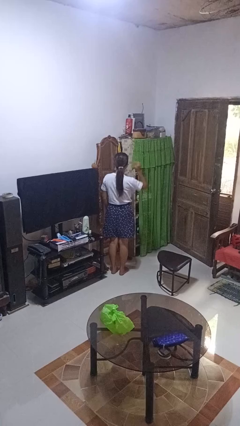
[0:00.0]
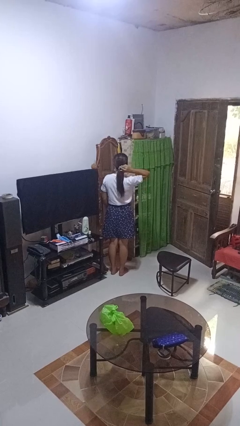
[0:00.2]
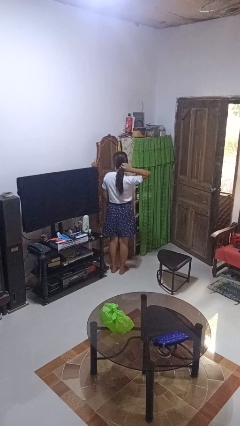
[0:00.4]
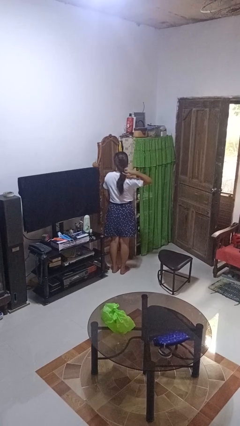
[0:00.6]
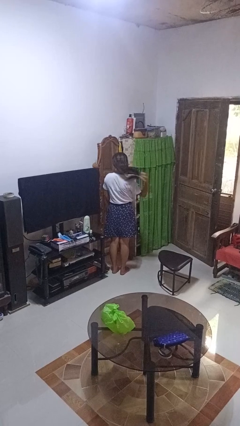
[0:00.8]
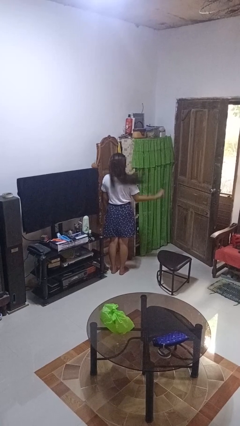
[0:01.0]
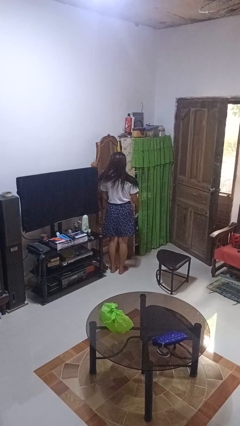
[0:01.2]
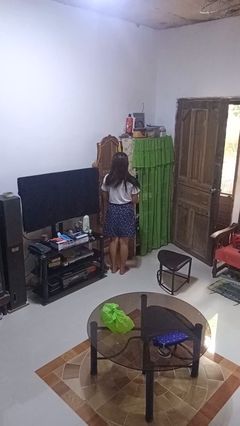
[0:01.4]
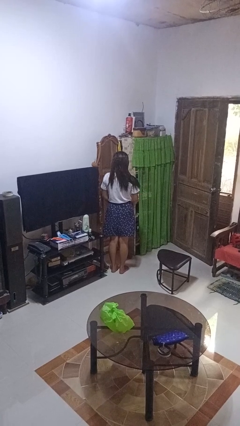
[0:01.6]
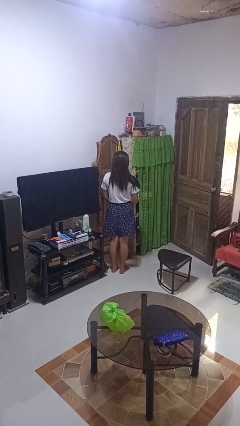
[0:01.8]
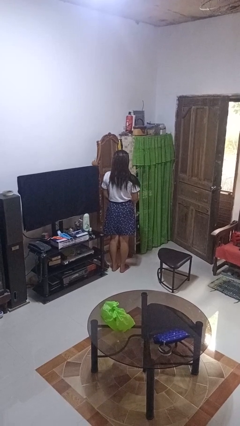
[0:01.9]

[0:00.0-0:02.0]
person takes off hairtie

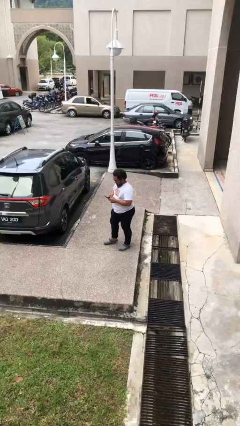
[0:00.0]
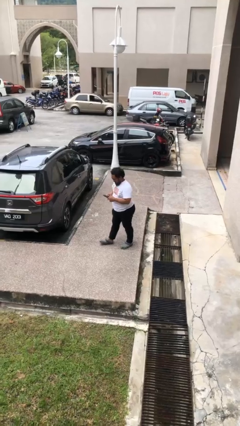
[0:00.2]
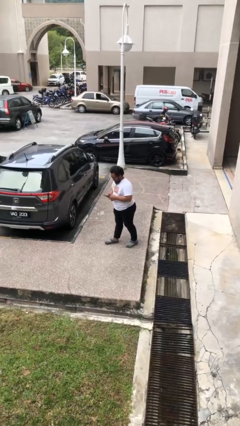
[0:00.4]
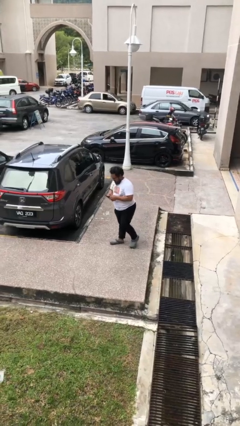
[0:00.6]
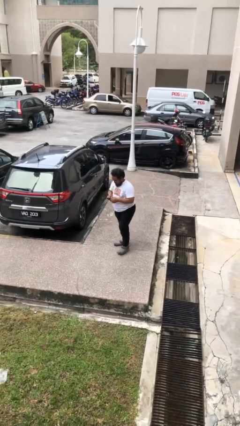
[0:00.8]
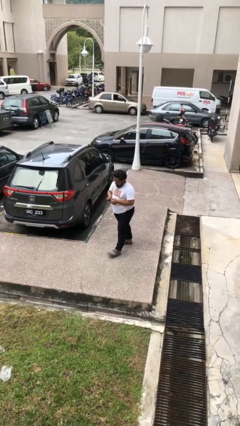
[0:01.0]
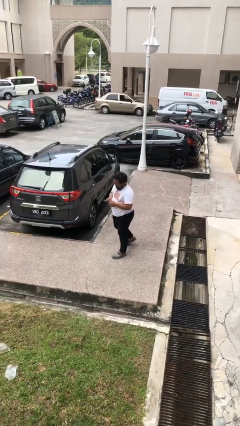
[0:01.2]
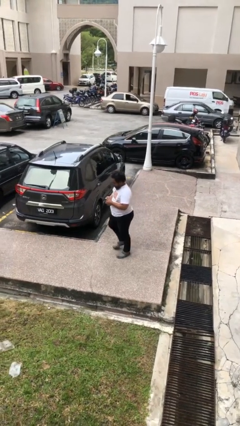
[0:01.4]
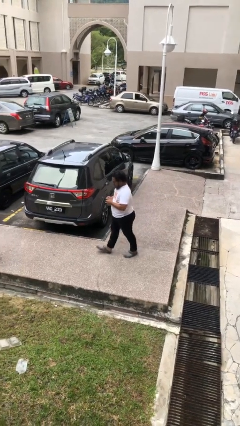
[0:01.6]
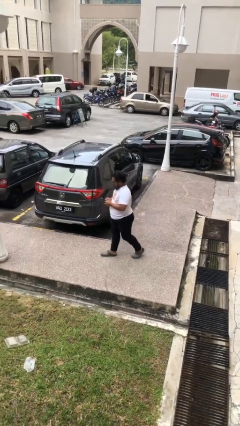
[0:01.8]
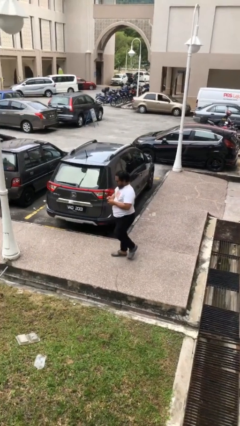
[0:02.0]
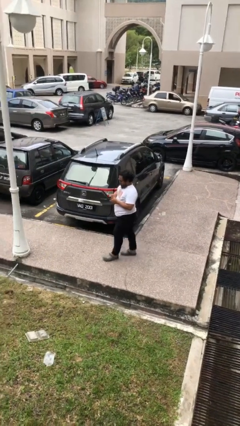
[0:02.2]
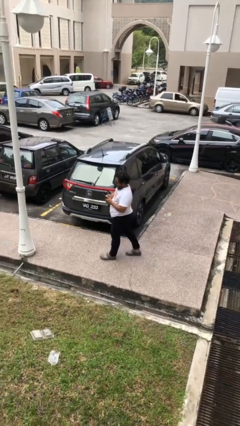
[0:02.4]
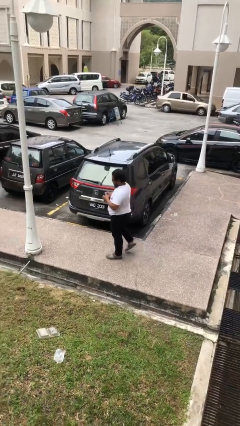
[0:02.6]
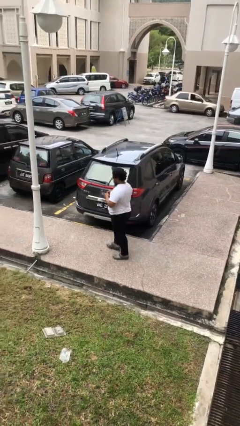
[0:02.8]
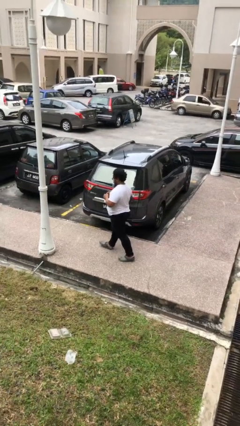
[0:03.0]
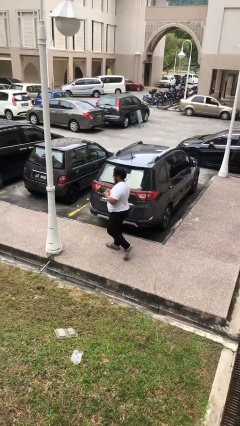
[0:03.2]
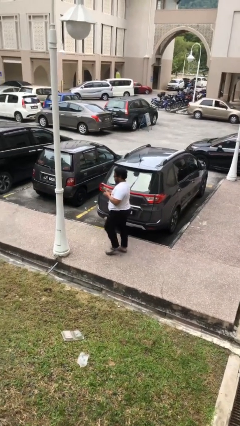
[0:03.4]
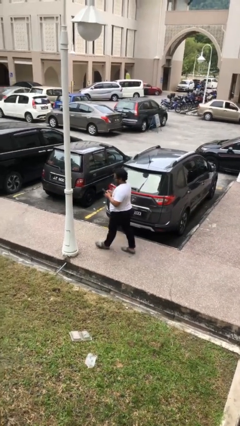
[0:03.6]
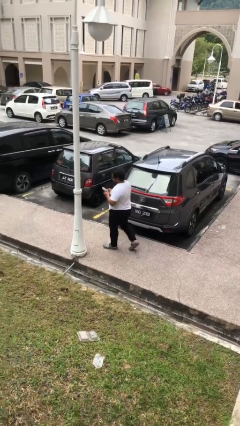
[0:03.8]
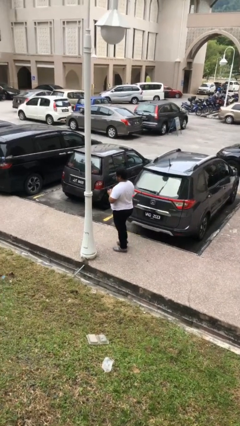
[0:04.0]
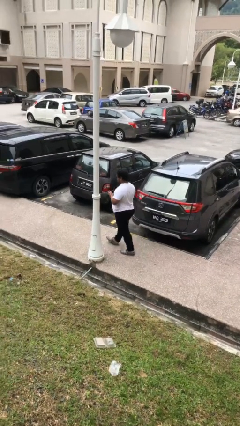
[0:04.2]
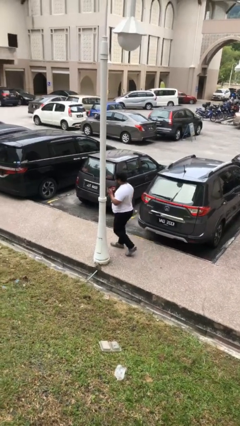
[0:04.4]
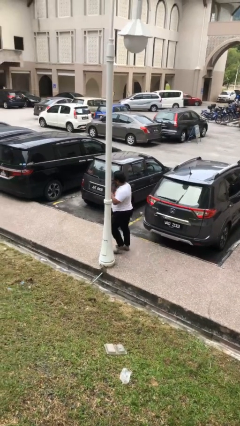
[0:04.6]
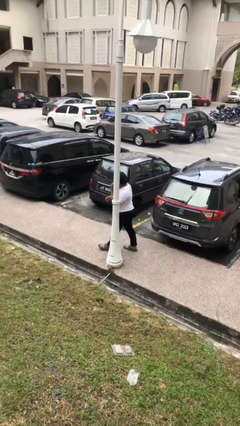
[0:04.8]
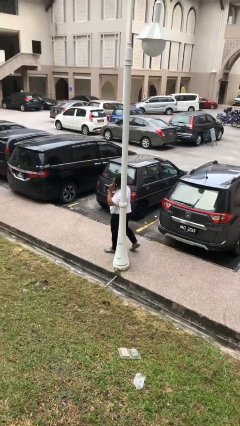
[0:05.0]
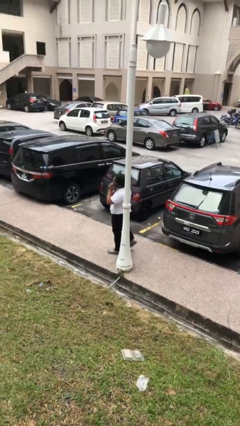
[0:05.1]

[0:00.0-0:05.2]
person texts on phone

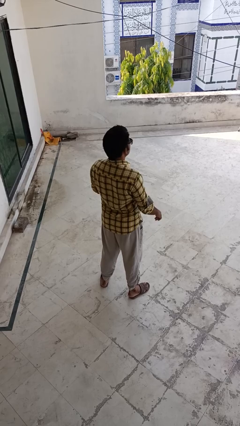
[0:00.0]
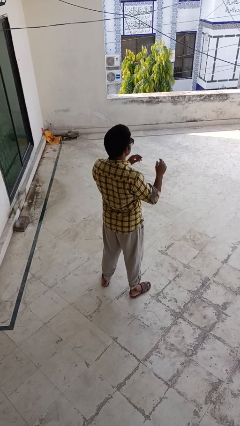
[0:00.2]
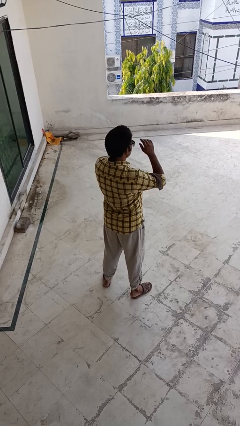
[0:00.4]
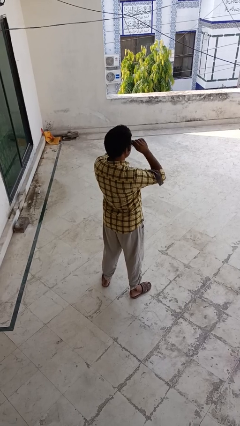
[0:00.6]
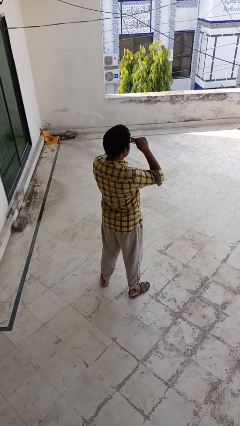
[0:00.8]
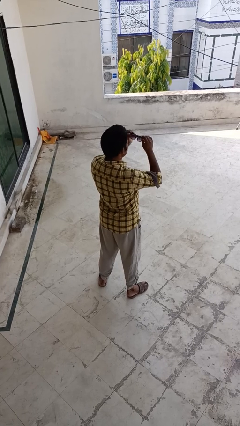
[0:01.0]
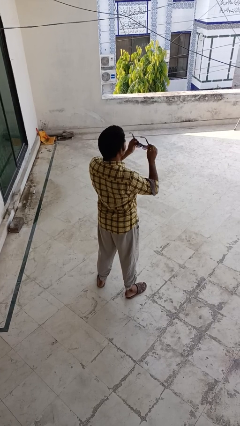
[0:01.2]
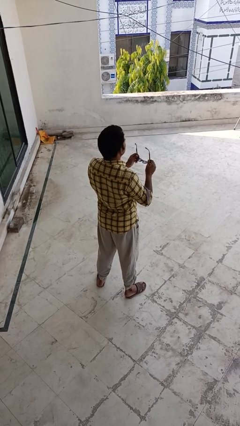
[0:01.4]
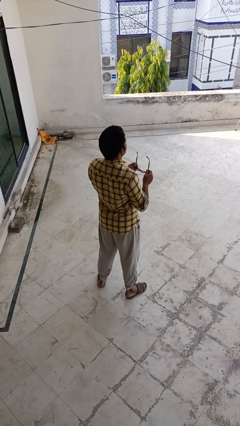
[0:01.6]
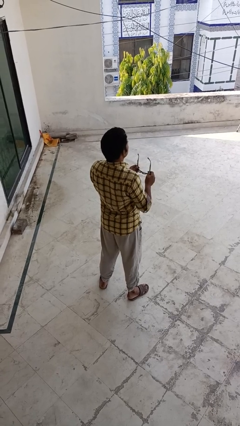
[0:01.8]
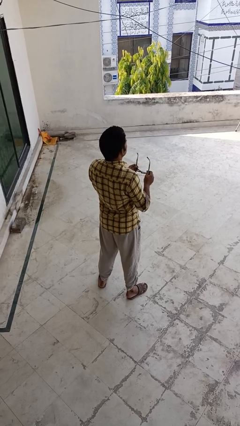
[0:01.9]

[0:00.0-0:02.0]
person takes off sunglasses

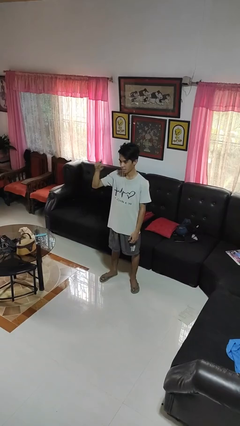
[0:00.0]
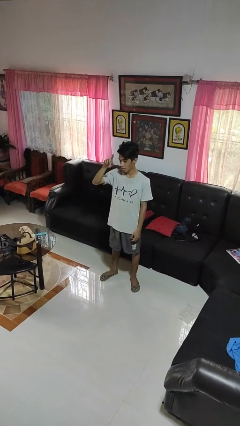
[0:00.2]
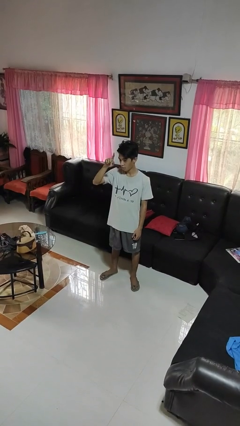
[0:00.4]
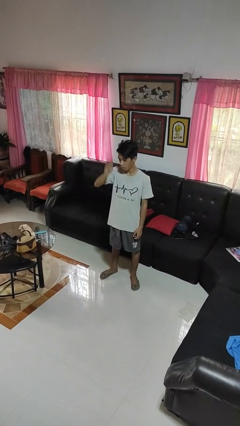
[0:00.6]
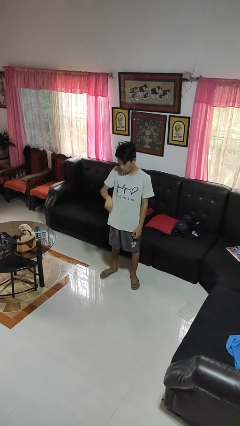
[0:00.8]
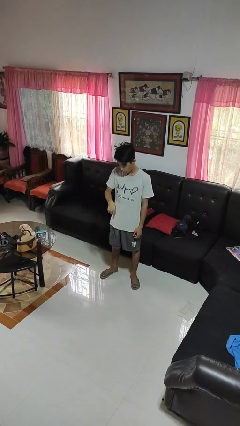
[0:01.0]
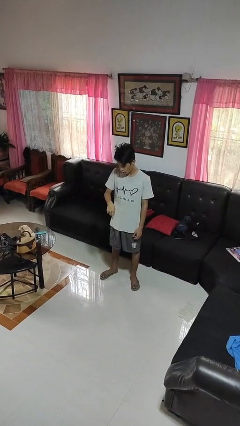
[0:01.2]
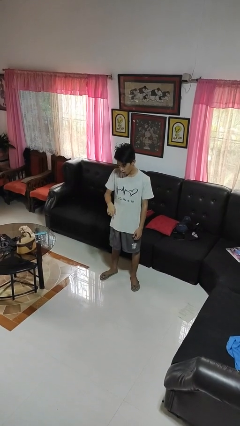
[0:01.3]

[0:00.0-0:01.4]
person gestures swipe down

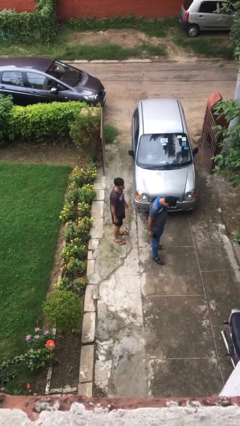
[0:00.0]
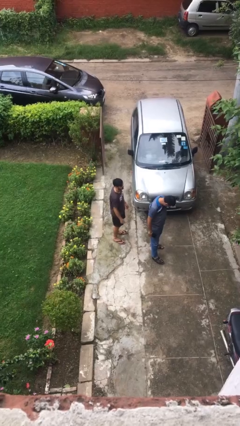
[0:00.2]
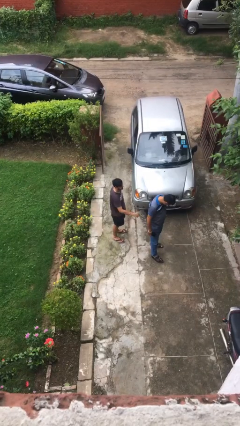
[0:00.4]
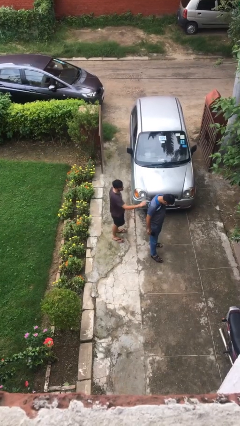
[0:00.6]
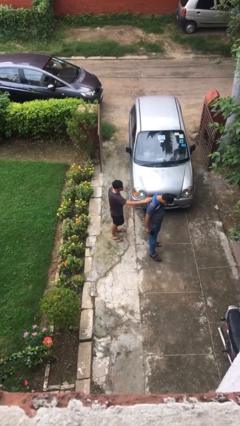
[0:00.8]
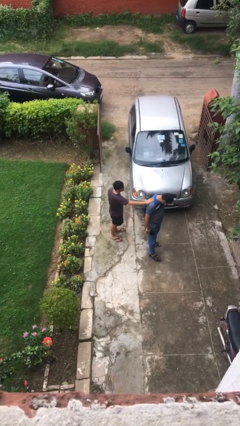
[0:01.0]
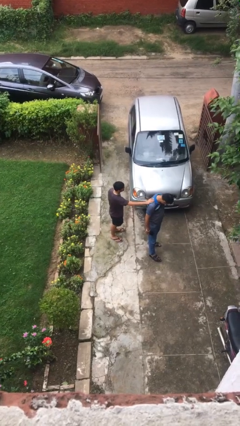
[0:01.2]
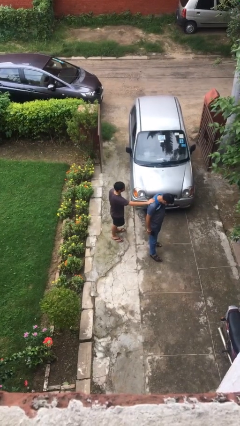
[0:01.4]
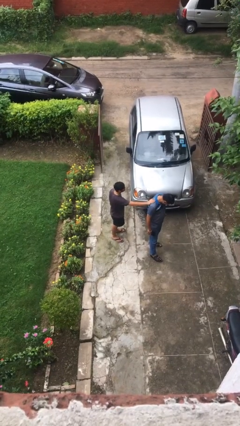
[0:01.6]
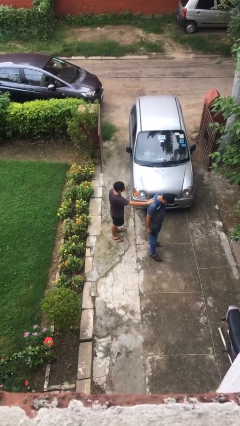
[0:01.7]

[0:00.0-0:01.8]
person touches back of person

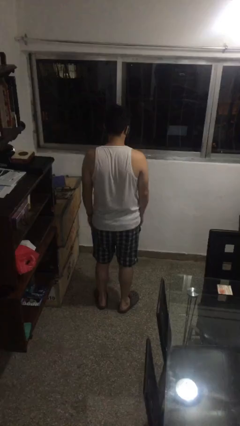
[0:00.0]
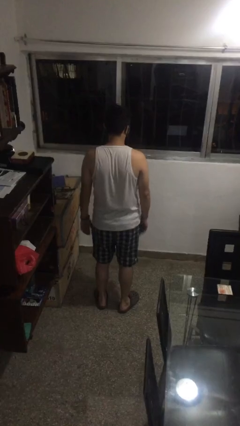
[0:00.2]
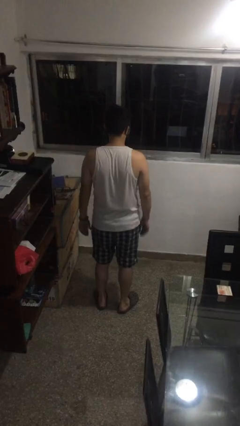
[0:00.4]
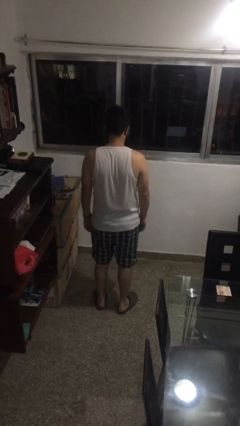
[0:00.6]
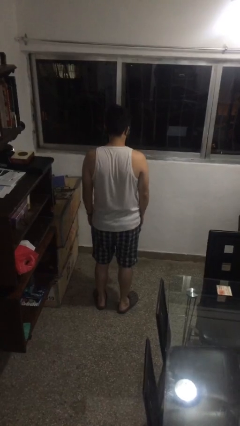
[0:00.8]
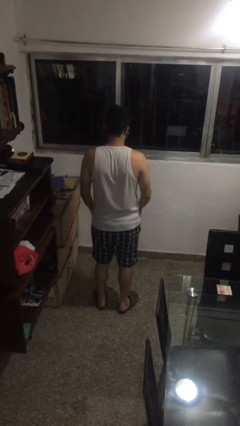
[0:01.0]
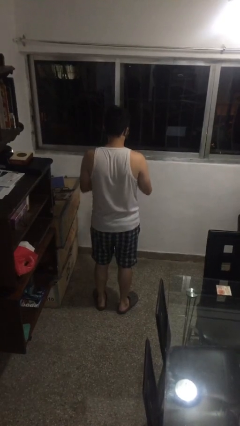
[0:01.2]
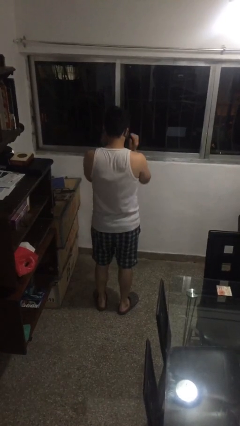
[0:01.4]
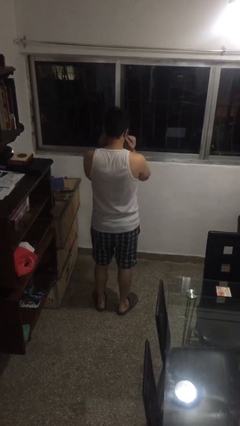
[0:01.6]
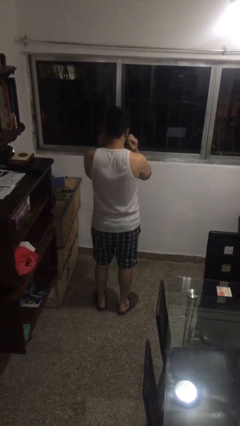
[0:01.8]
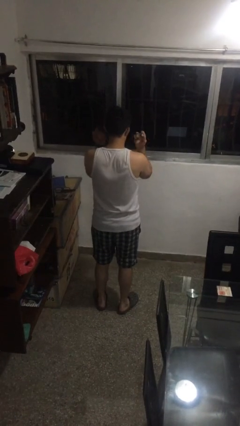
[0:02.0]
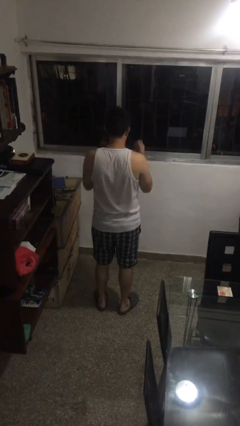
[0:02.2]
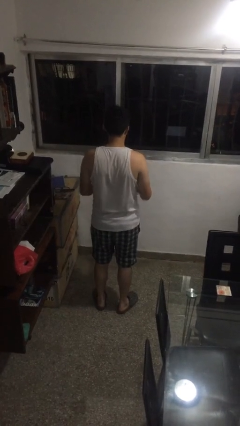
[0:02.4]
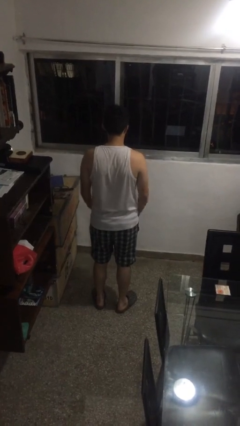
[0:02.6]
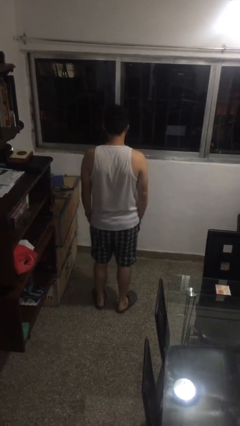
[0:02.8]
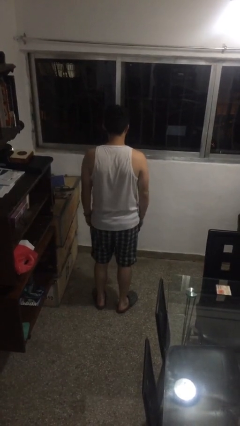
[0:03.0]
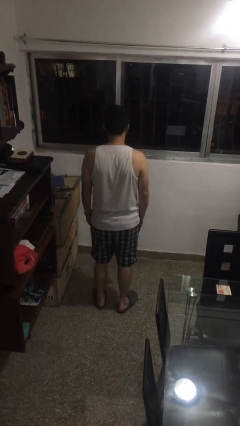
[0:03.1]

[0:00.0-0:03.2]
person takes off facemask

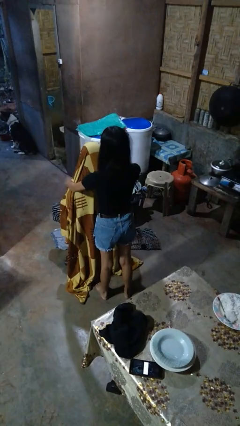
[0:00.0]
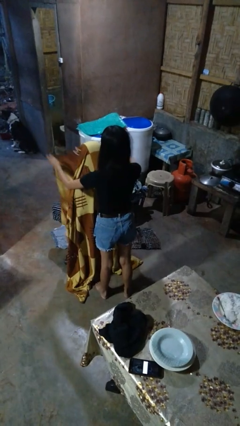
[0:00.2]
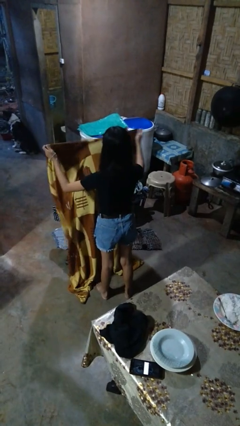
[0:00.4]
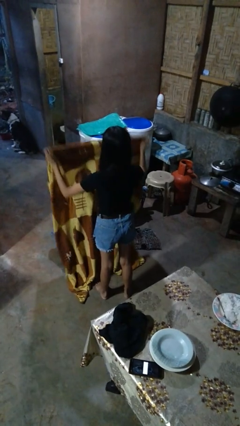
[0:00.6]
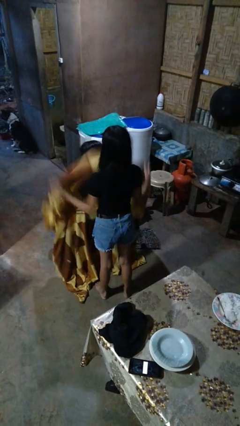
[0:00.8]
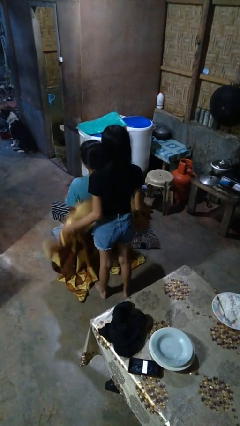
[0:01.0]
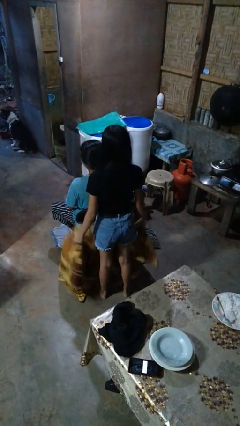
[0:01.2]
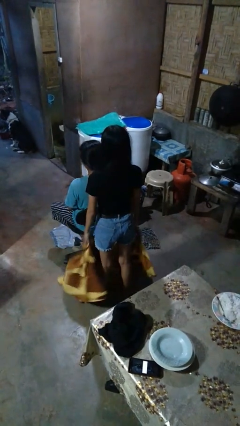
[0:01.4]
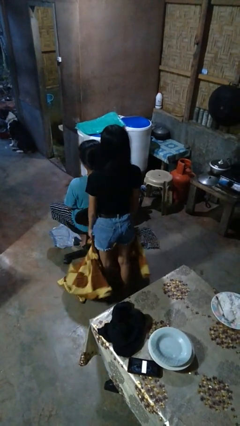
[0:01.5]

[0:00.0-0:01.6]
person uncovers friend with blanket
